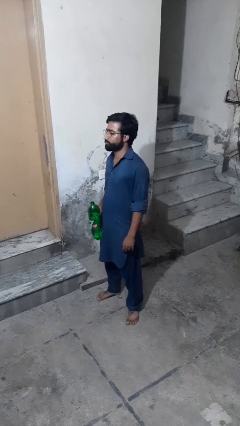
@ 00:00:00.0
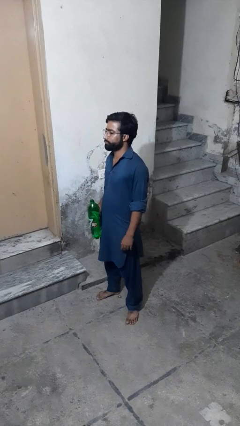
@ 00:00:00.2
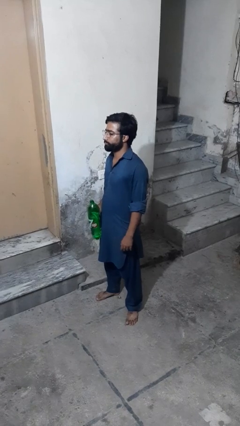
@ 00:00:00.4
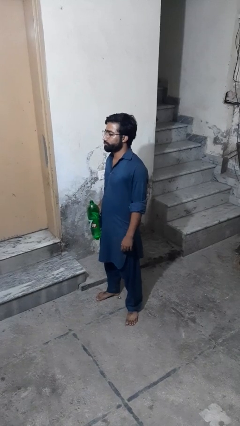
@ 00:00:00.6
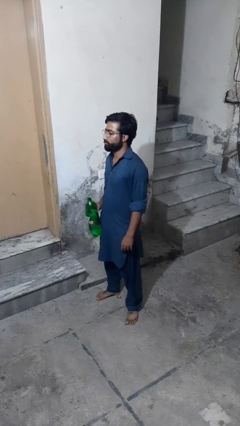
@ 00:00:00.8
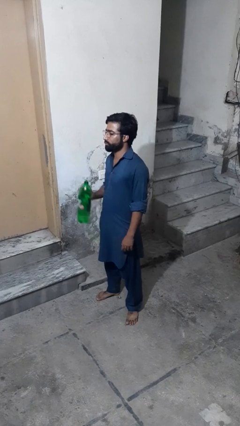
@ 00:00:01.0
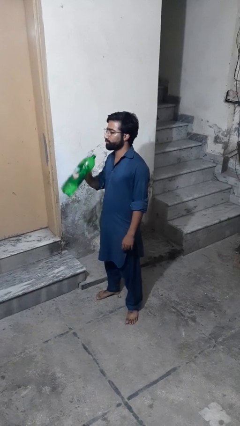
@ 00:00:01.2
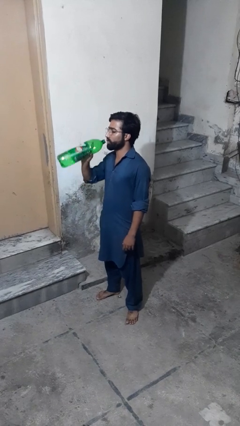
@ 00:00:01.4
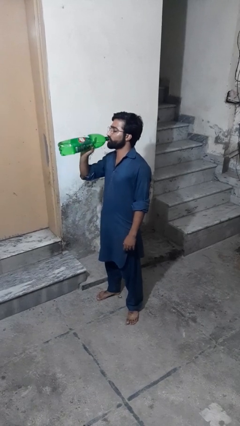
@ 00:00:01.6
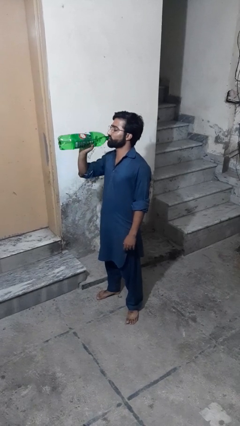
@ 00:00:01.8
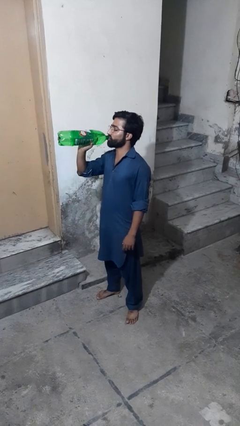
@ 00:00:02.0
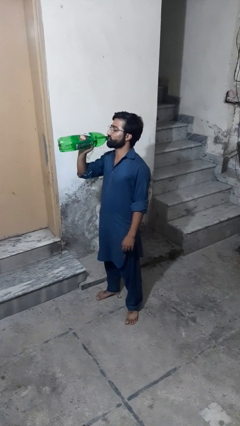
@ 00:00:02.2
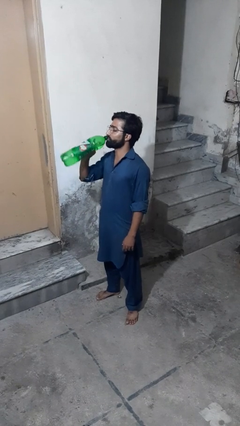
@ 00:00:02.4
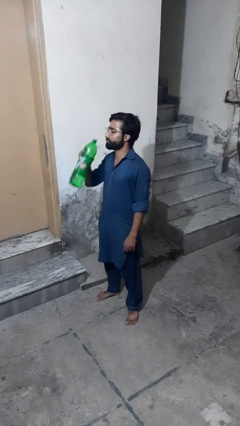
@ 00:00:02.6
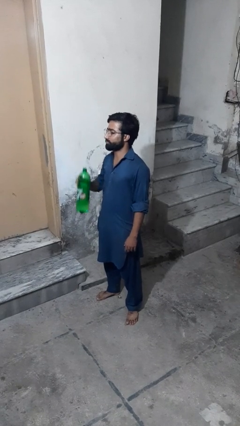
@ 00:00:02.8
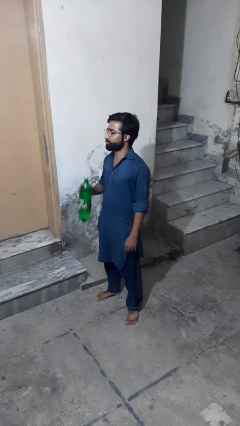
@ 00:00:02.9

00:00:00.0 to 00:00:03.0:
person drinks from bottle

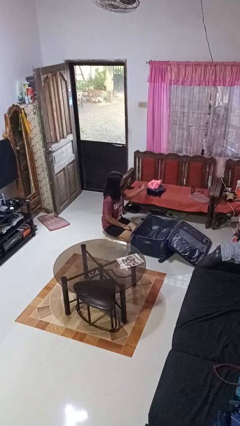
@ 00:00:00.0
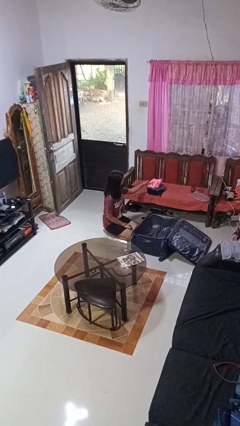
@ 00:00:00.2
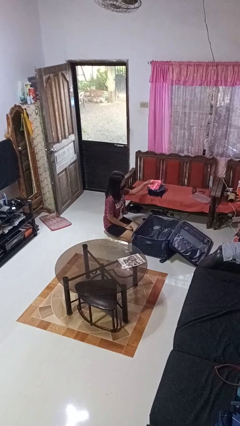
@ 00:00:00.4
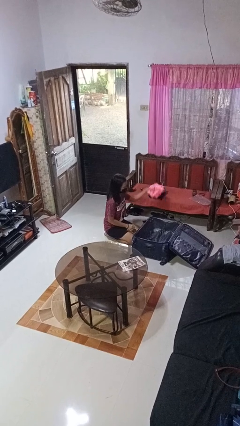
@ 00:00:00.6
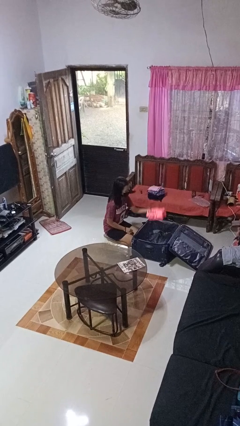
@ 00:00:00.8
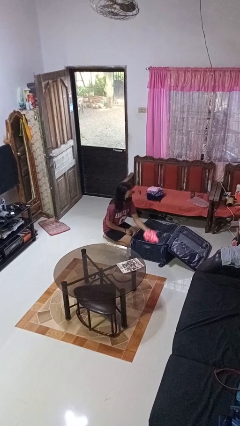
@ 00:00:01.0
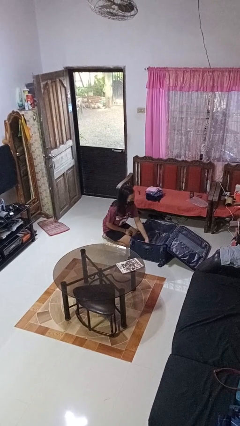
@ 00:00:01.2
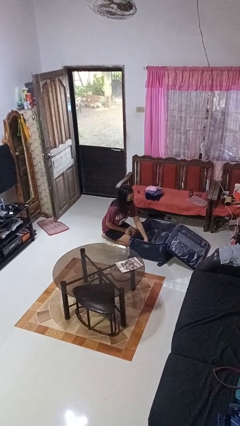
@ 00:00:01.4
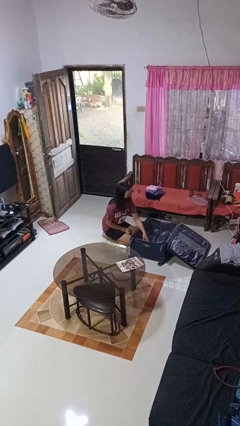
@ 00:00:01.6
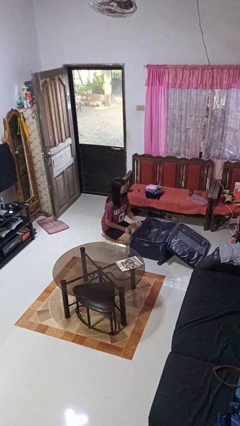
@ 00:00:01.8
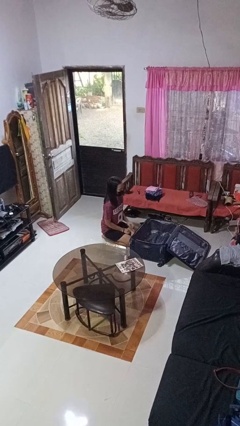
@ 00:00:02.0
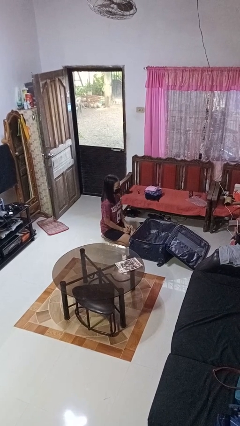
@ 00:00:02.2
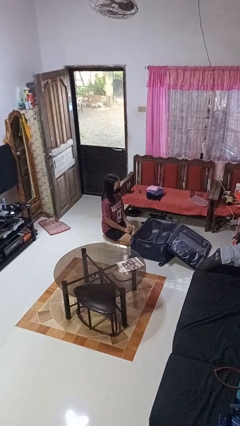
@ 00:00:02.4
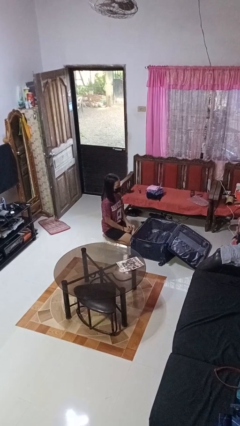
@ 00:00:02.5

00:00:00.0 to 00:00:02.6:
person loads clothes into suitcase

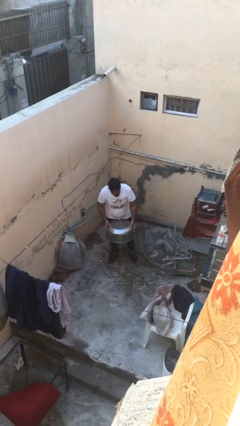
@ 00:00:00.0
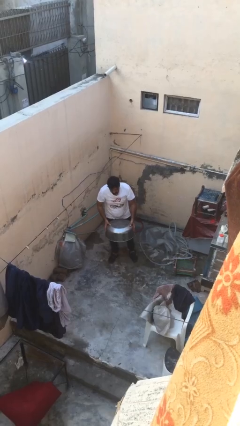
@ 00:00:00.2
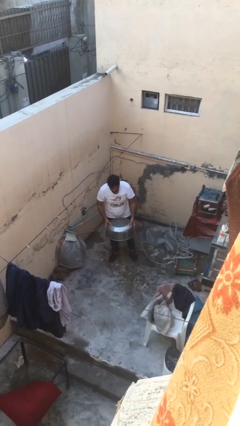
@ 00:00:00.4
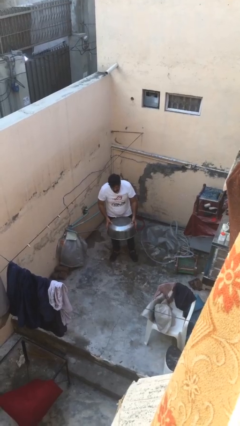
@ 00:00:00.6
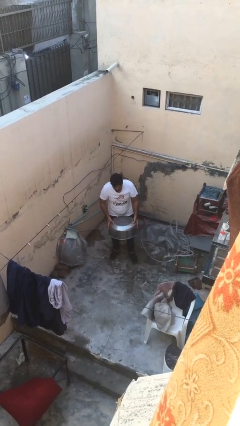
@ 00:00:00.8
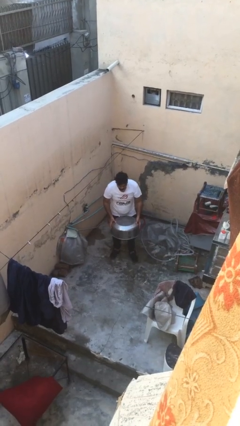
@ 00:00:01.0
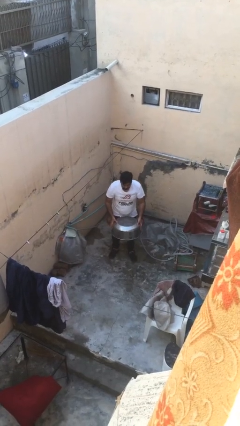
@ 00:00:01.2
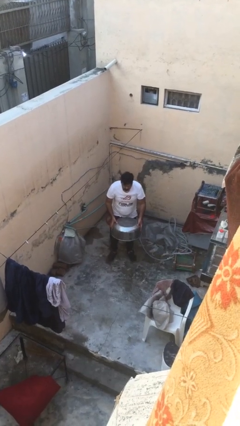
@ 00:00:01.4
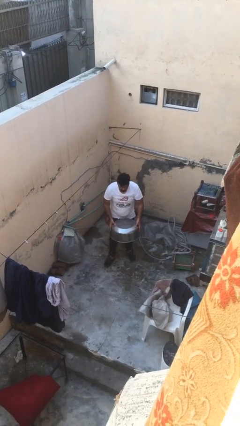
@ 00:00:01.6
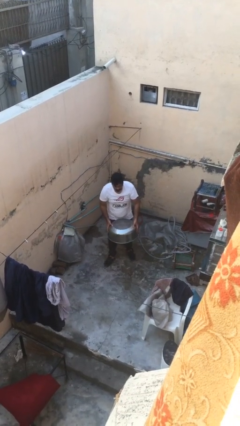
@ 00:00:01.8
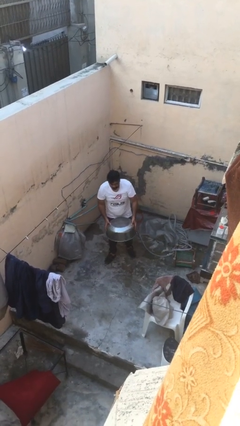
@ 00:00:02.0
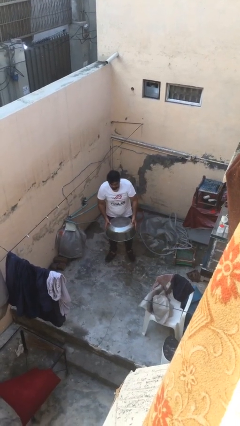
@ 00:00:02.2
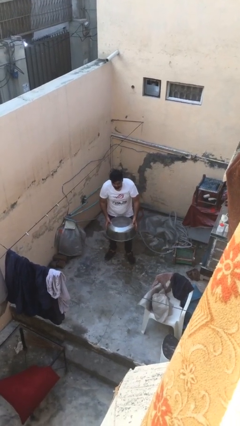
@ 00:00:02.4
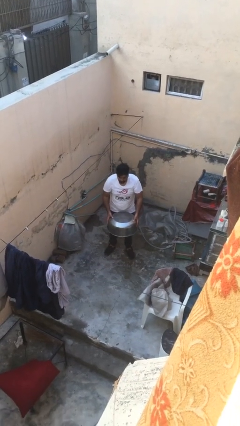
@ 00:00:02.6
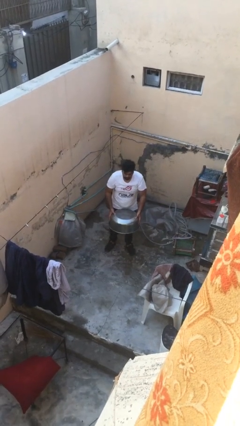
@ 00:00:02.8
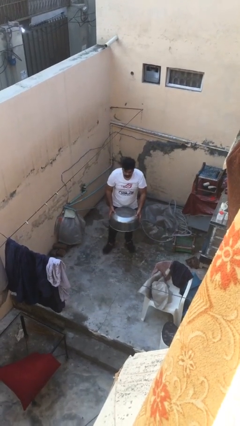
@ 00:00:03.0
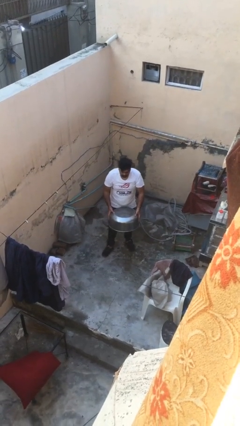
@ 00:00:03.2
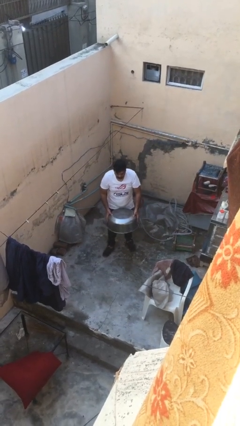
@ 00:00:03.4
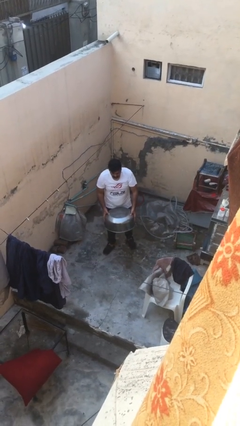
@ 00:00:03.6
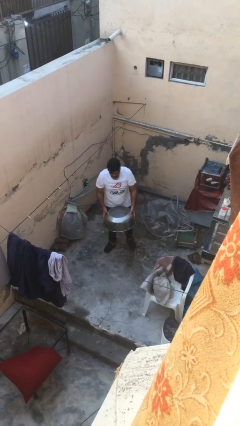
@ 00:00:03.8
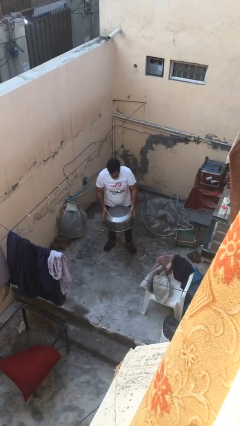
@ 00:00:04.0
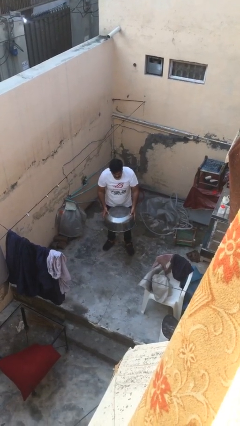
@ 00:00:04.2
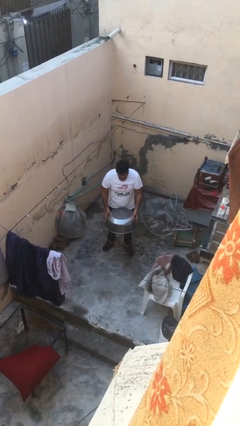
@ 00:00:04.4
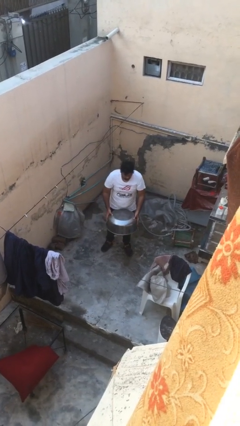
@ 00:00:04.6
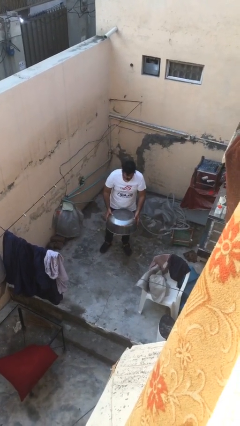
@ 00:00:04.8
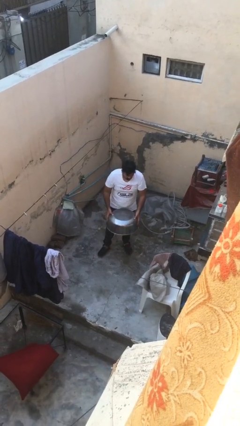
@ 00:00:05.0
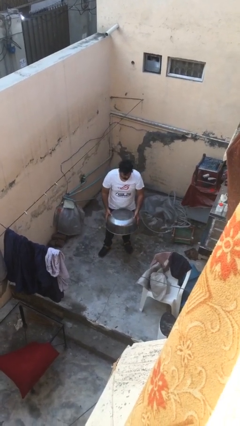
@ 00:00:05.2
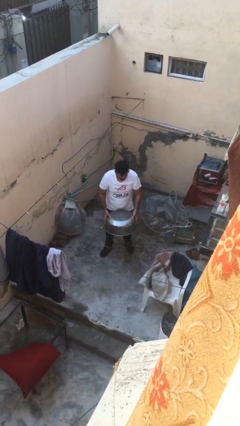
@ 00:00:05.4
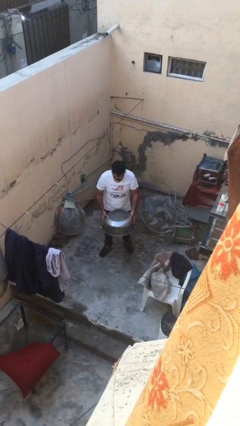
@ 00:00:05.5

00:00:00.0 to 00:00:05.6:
person carries heavy object

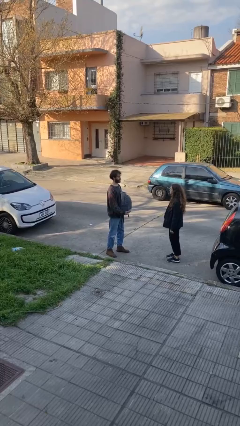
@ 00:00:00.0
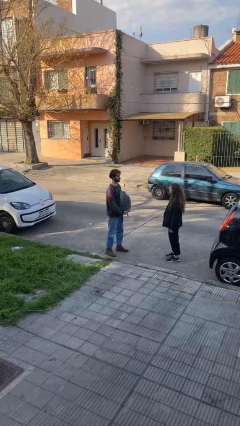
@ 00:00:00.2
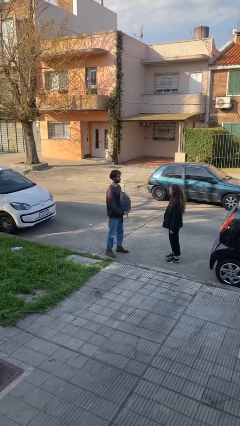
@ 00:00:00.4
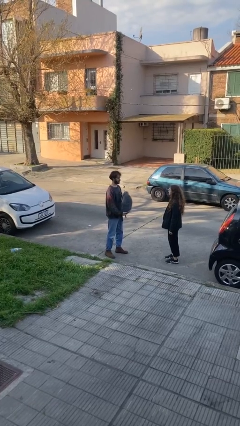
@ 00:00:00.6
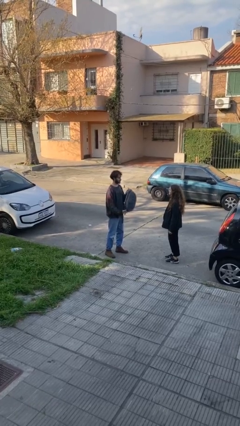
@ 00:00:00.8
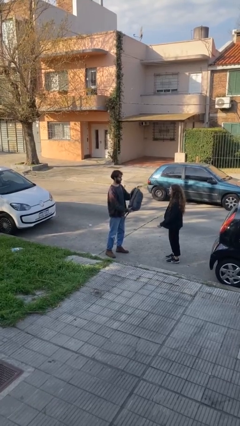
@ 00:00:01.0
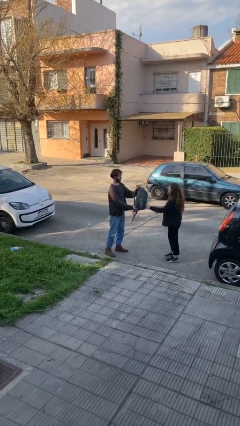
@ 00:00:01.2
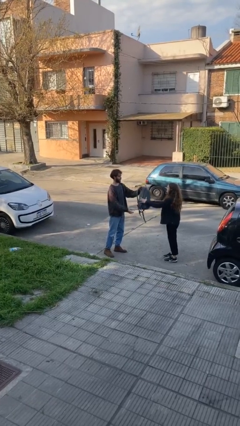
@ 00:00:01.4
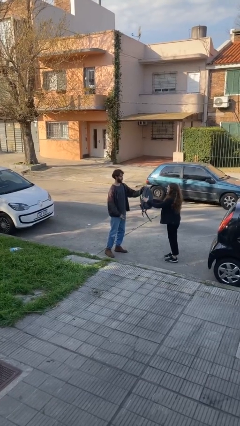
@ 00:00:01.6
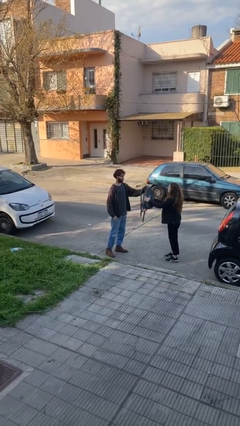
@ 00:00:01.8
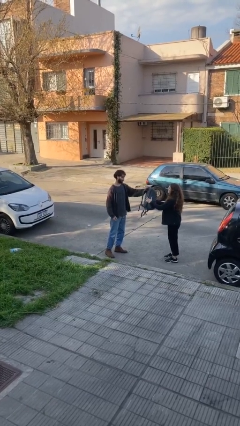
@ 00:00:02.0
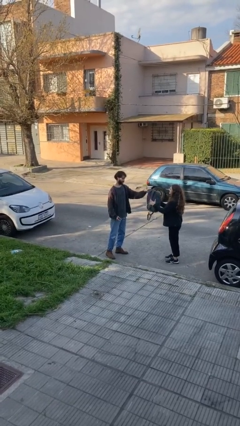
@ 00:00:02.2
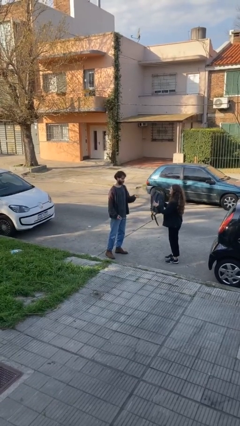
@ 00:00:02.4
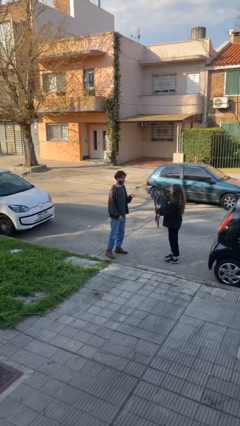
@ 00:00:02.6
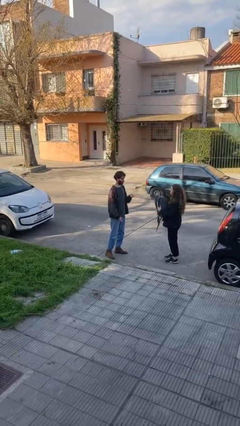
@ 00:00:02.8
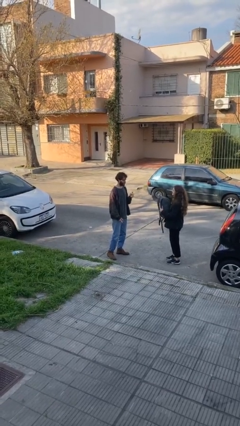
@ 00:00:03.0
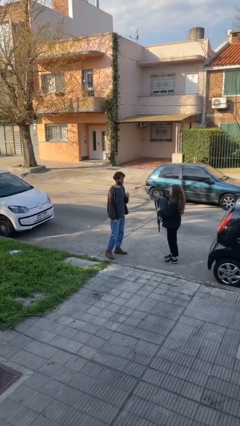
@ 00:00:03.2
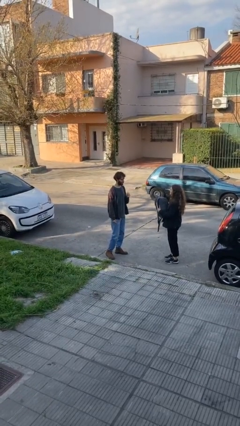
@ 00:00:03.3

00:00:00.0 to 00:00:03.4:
person transfers object to person

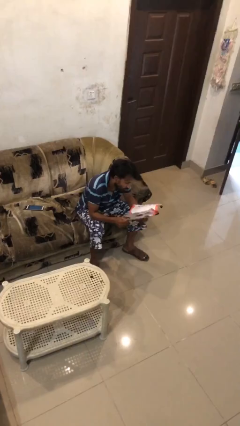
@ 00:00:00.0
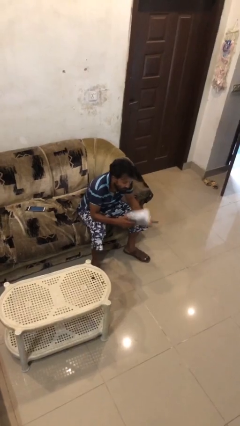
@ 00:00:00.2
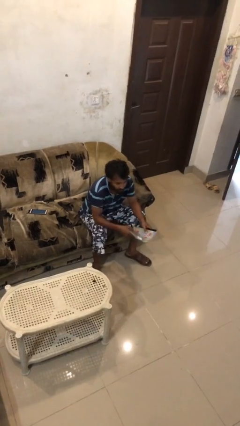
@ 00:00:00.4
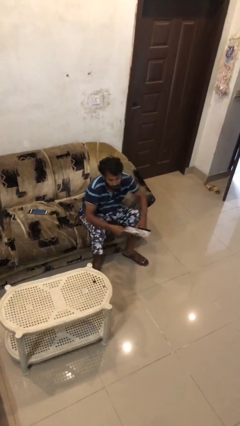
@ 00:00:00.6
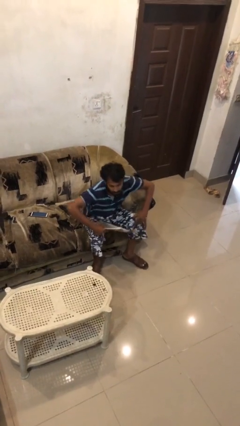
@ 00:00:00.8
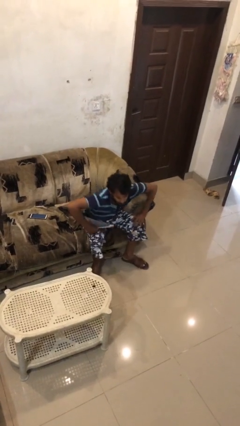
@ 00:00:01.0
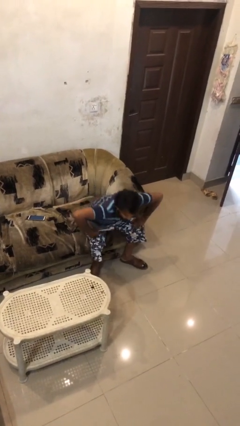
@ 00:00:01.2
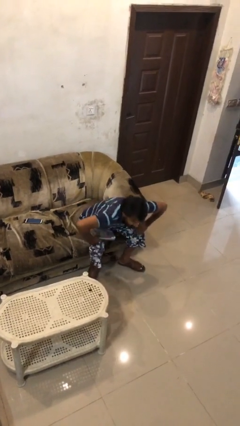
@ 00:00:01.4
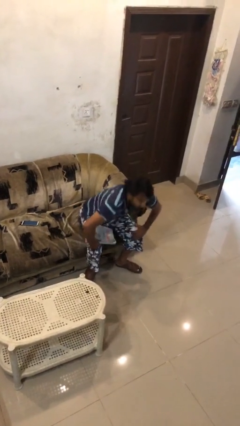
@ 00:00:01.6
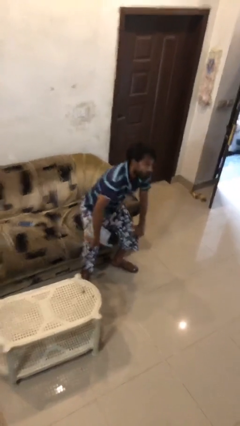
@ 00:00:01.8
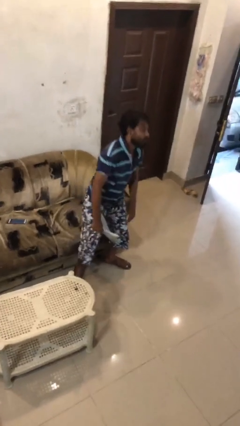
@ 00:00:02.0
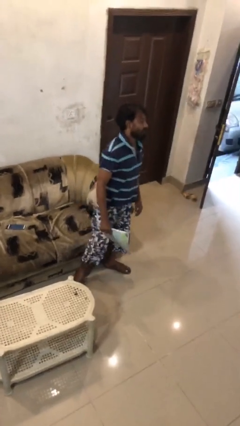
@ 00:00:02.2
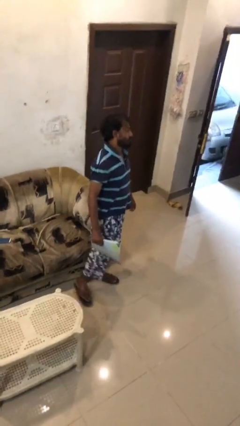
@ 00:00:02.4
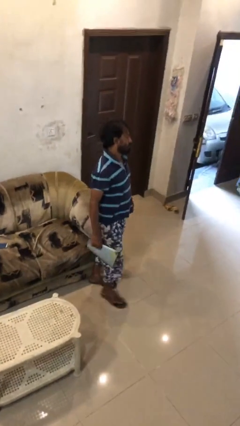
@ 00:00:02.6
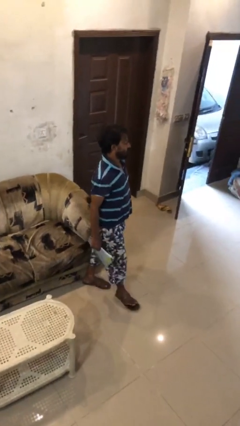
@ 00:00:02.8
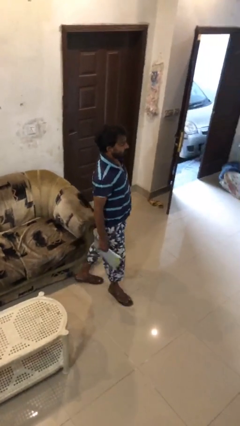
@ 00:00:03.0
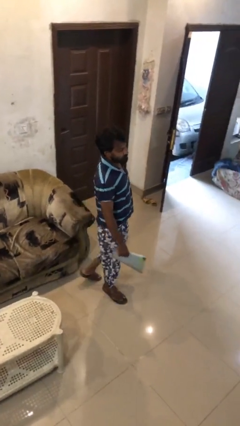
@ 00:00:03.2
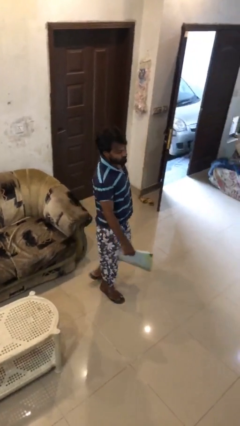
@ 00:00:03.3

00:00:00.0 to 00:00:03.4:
person stands up
